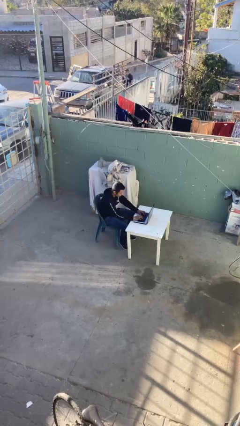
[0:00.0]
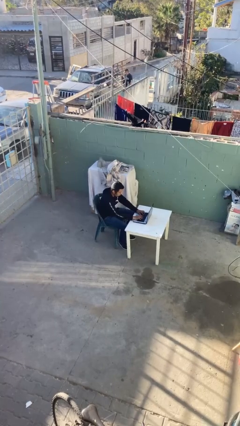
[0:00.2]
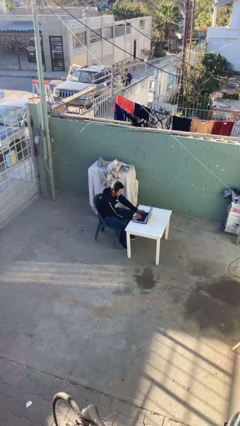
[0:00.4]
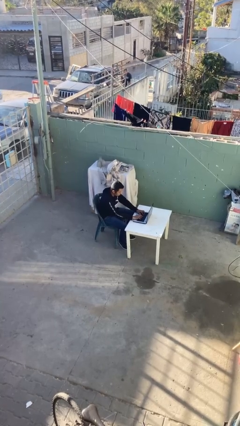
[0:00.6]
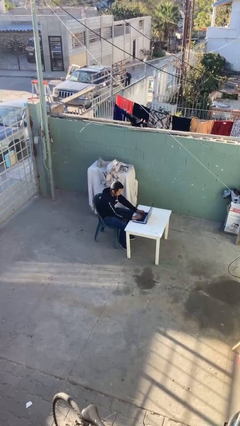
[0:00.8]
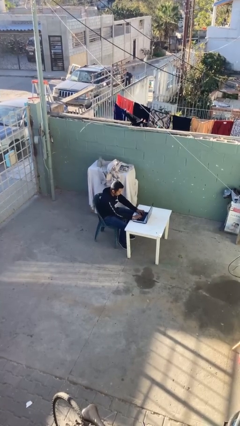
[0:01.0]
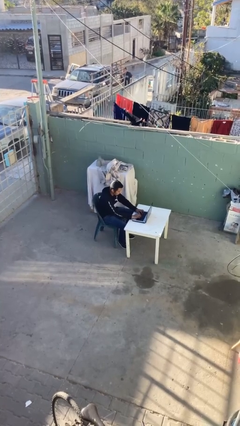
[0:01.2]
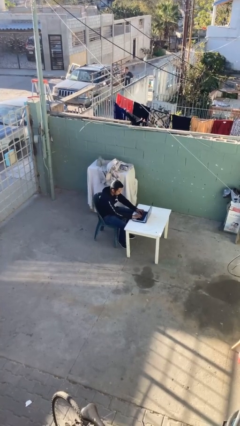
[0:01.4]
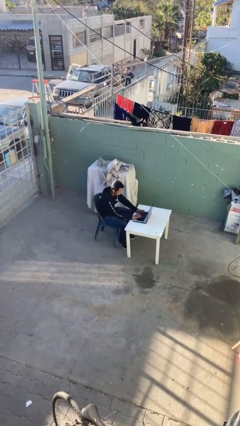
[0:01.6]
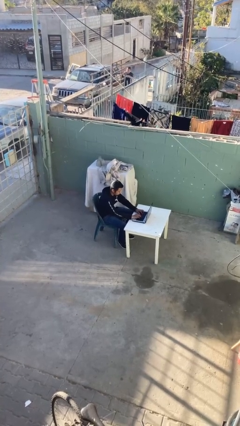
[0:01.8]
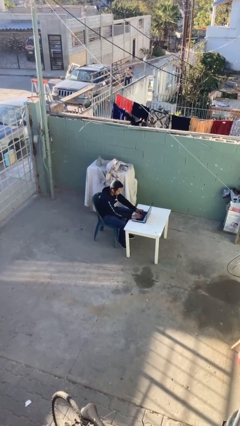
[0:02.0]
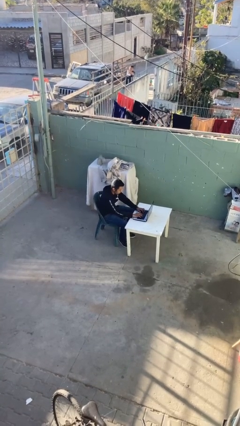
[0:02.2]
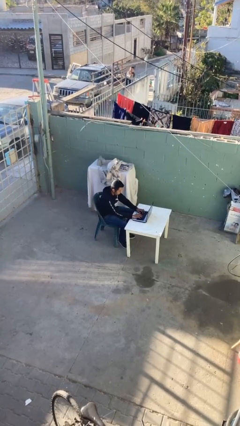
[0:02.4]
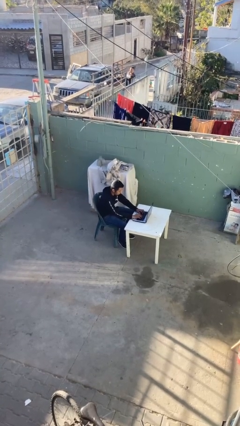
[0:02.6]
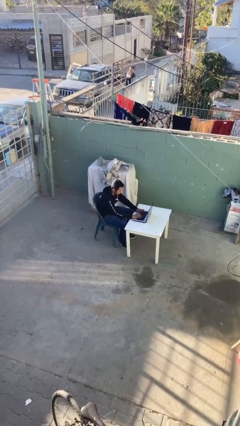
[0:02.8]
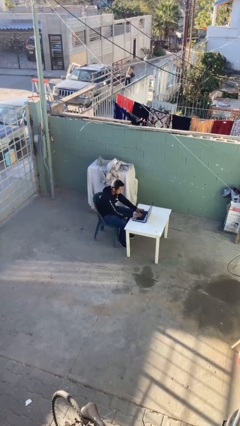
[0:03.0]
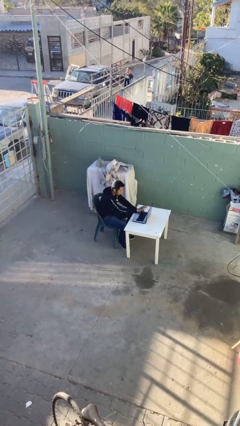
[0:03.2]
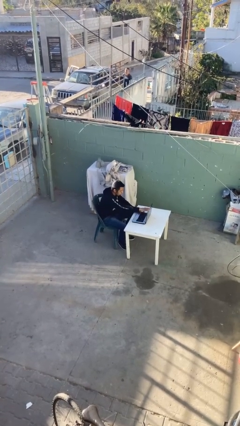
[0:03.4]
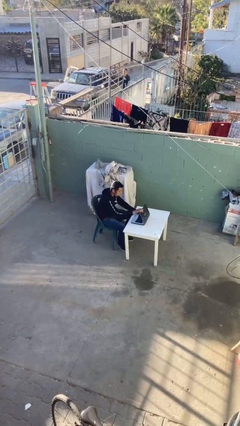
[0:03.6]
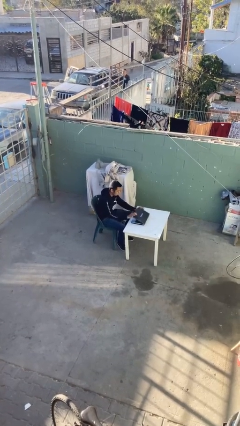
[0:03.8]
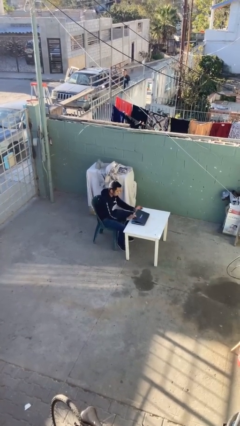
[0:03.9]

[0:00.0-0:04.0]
person interacts with laptop

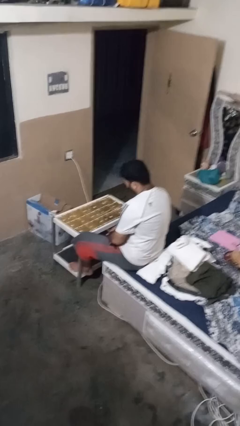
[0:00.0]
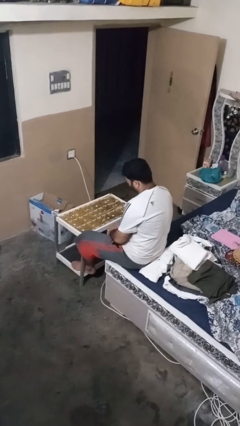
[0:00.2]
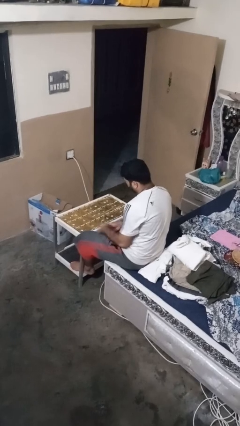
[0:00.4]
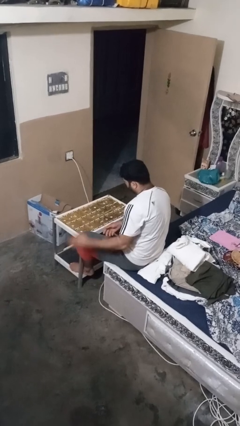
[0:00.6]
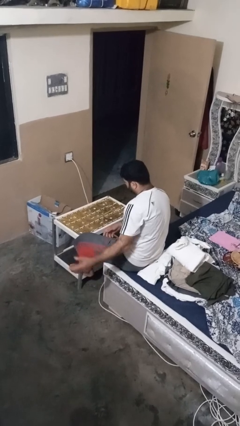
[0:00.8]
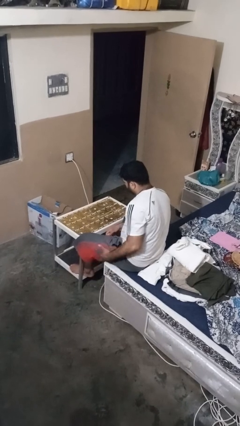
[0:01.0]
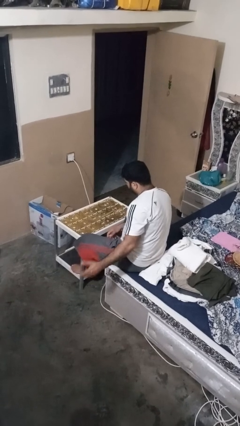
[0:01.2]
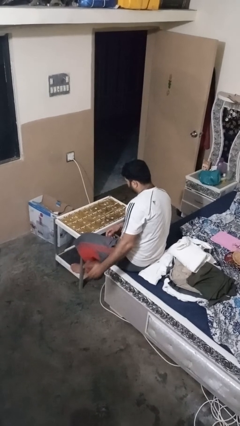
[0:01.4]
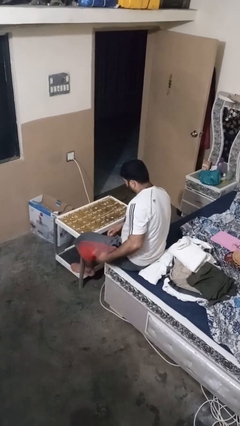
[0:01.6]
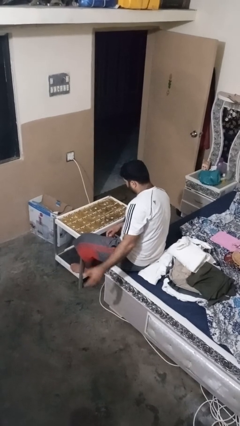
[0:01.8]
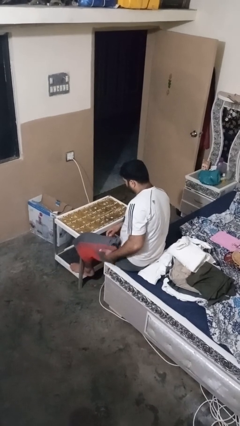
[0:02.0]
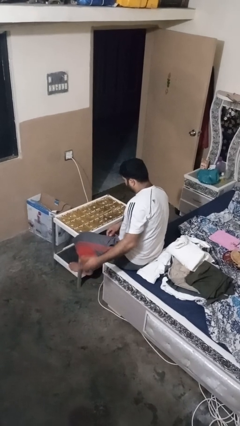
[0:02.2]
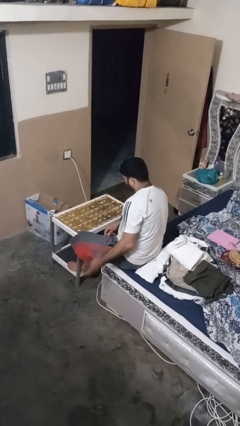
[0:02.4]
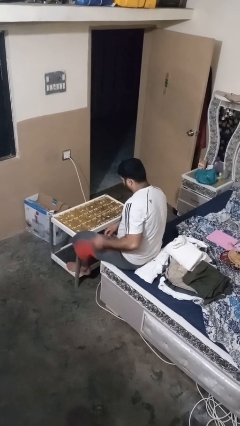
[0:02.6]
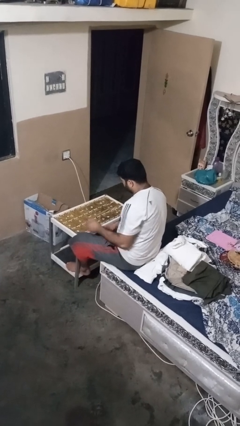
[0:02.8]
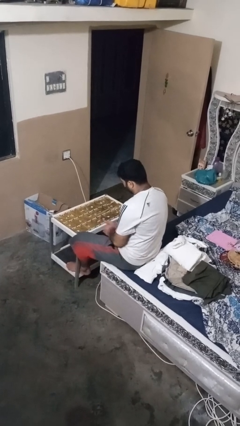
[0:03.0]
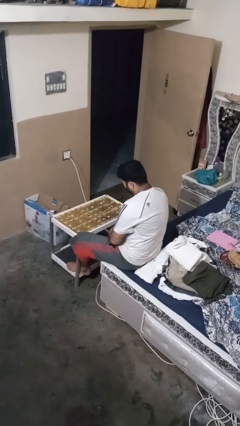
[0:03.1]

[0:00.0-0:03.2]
person slaps hands on thighs

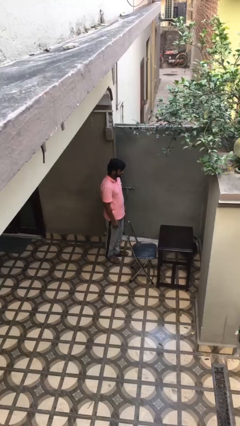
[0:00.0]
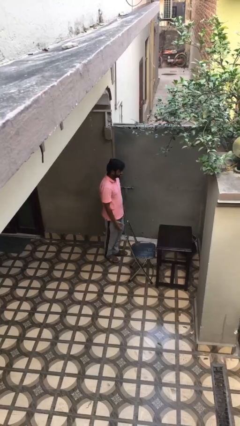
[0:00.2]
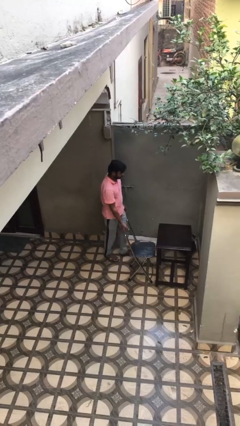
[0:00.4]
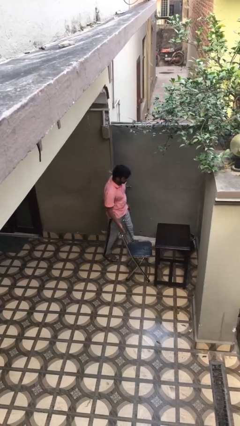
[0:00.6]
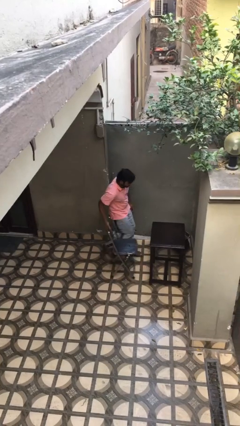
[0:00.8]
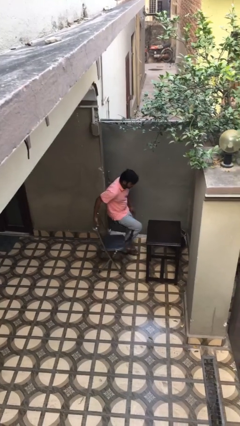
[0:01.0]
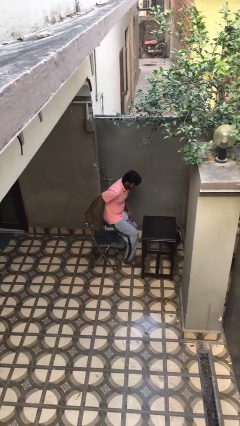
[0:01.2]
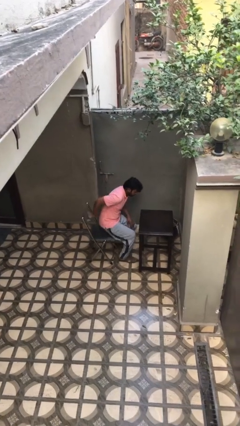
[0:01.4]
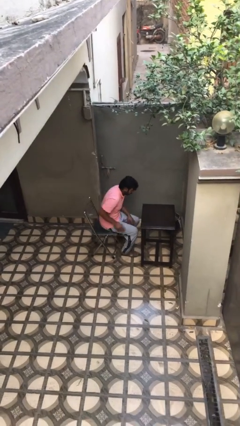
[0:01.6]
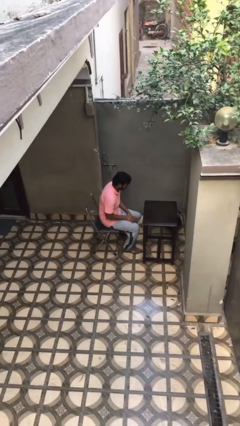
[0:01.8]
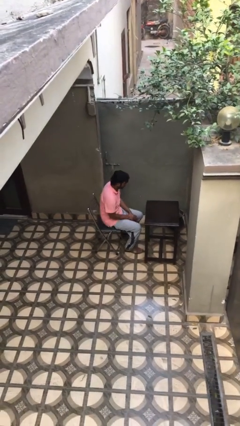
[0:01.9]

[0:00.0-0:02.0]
person sits down

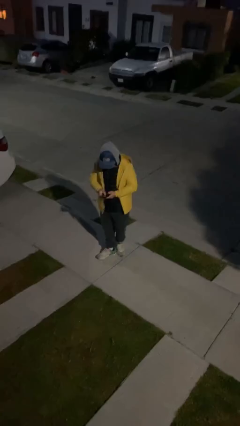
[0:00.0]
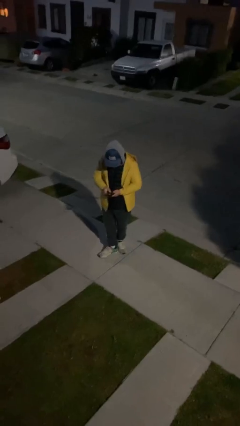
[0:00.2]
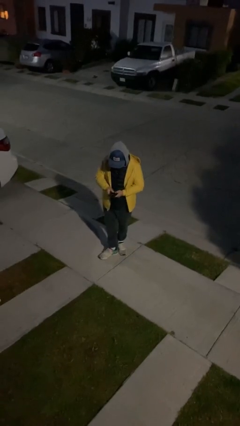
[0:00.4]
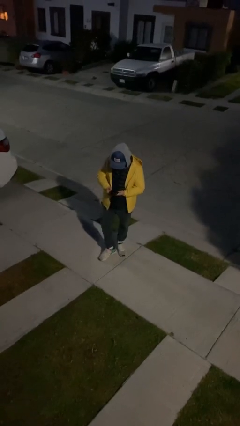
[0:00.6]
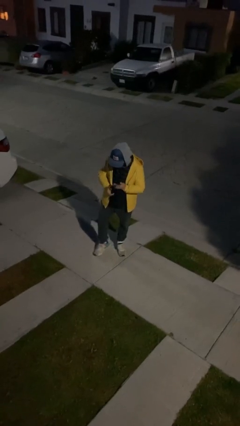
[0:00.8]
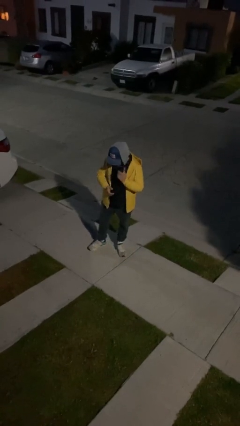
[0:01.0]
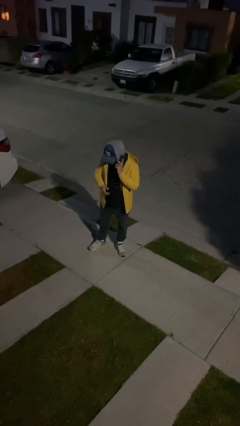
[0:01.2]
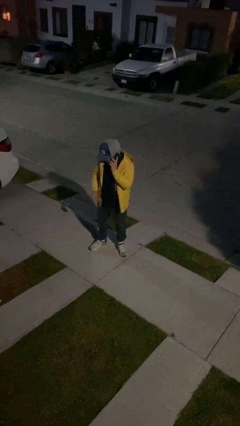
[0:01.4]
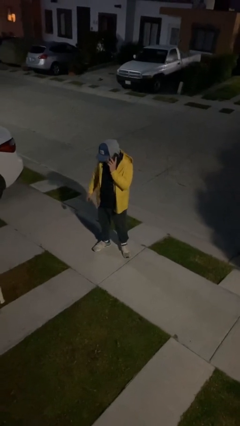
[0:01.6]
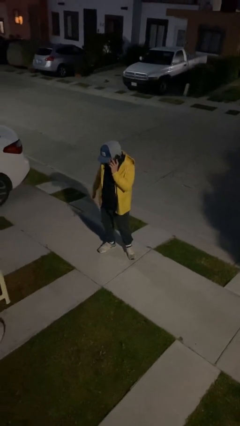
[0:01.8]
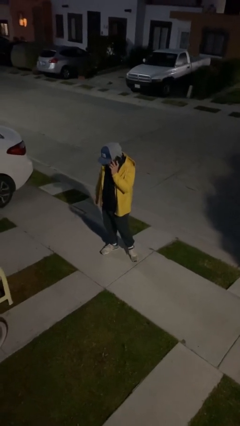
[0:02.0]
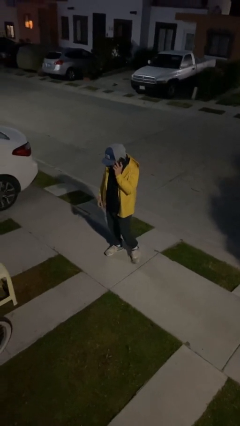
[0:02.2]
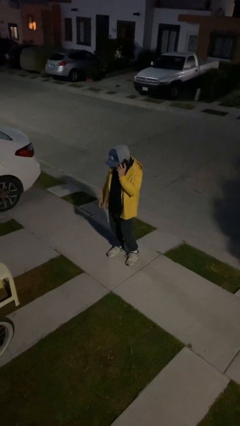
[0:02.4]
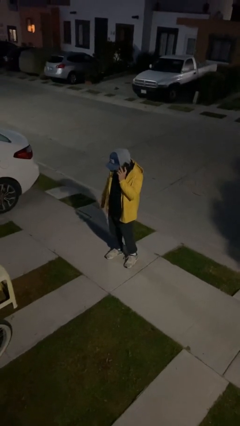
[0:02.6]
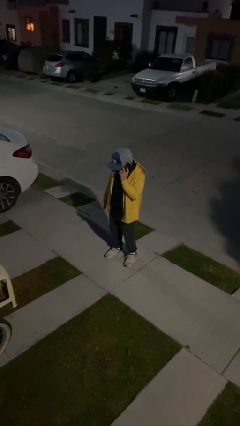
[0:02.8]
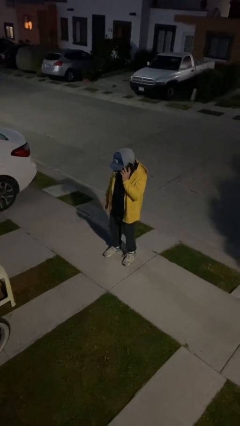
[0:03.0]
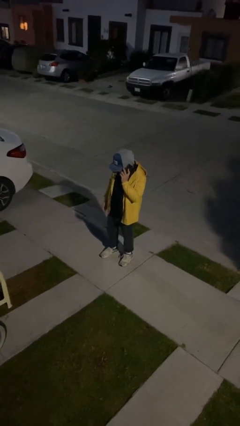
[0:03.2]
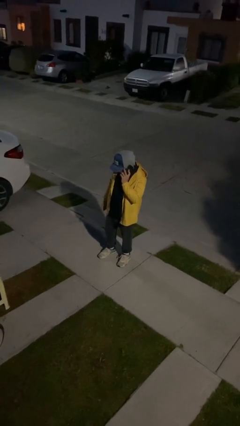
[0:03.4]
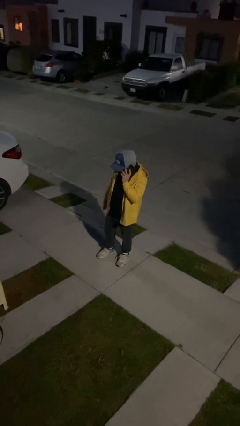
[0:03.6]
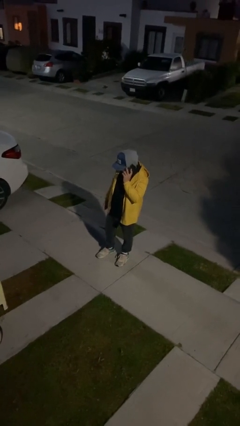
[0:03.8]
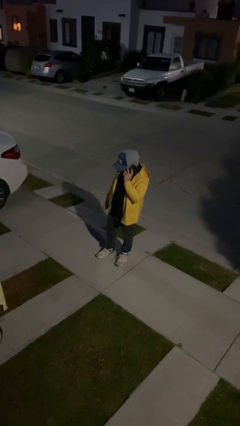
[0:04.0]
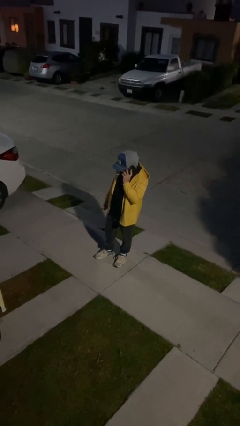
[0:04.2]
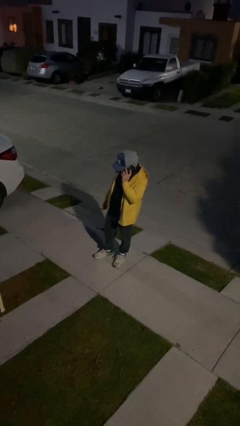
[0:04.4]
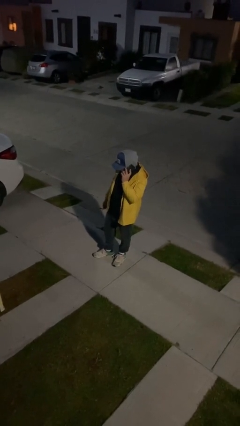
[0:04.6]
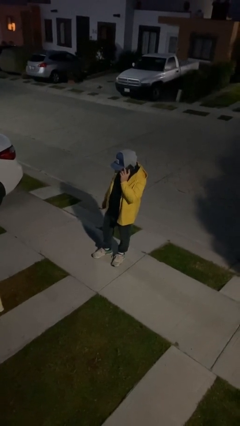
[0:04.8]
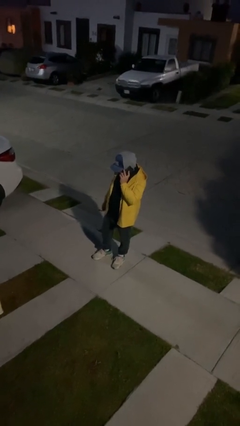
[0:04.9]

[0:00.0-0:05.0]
person talks on phone

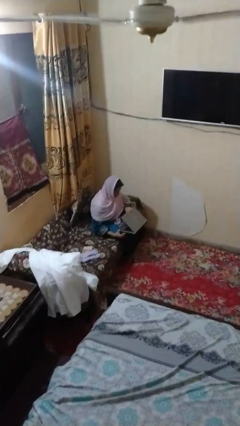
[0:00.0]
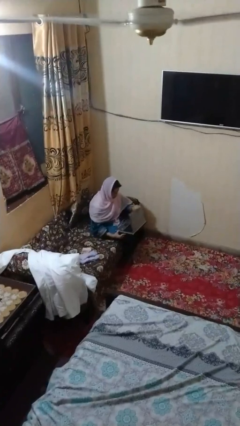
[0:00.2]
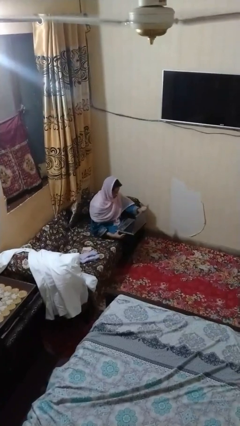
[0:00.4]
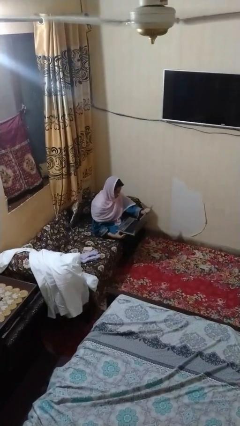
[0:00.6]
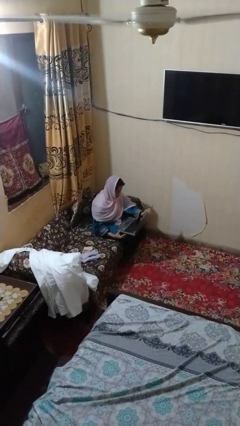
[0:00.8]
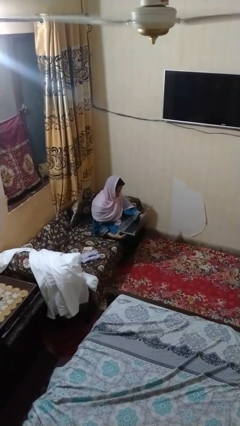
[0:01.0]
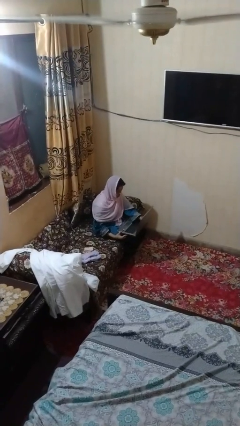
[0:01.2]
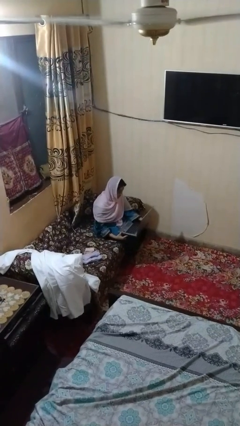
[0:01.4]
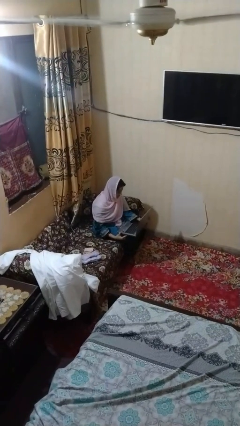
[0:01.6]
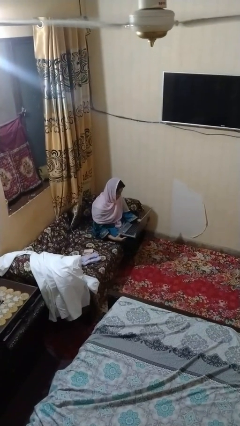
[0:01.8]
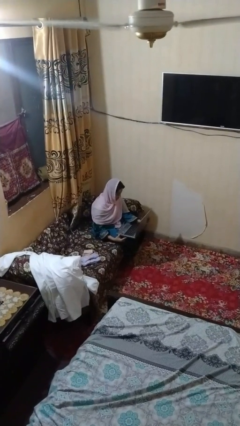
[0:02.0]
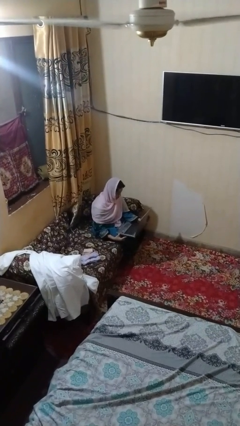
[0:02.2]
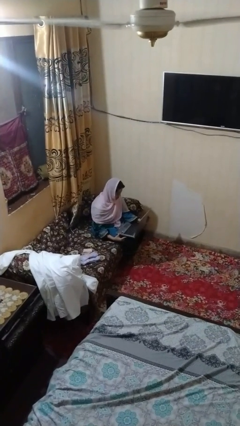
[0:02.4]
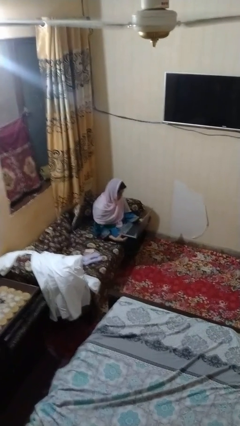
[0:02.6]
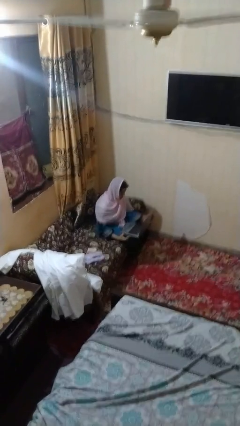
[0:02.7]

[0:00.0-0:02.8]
person opens laptop

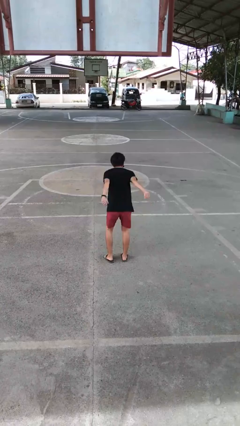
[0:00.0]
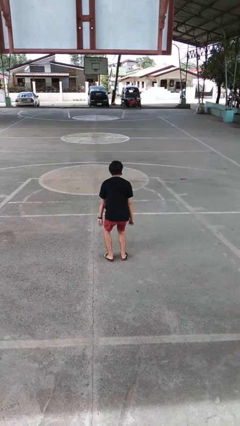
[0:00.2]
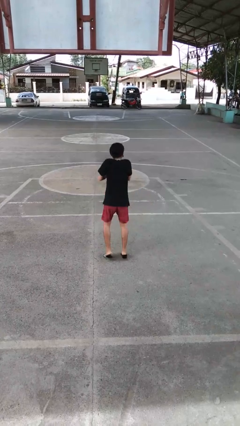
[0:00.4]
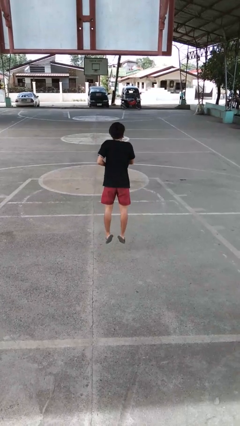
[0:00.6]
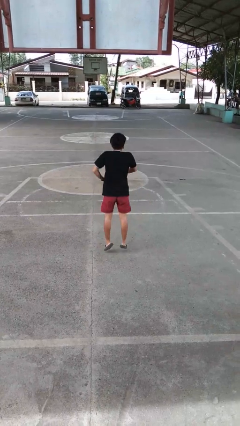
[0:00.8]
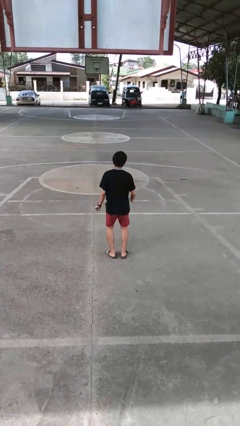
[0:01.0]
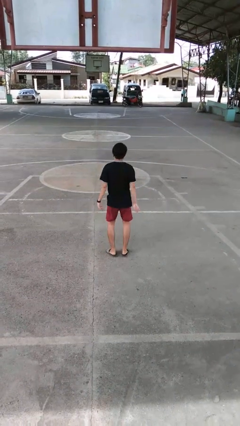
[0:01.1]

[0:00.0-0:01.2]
person jumps
